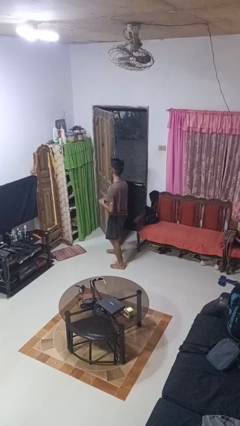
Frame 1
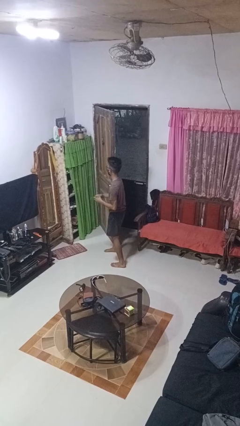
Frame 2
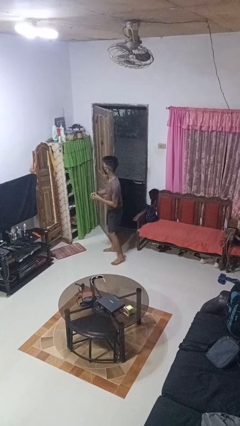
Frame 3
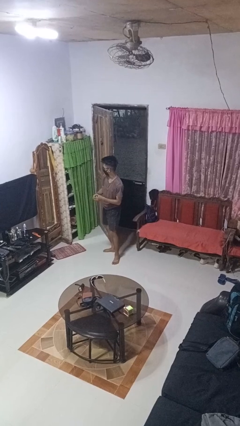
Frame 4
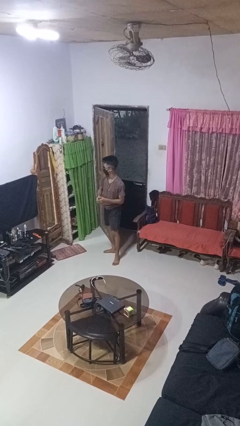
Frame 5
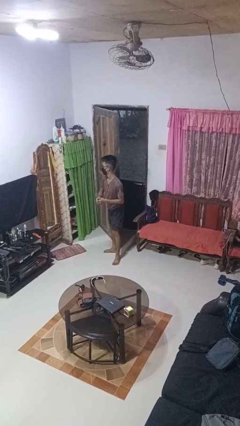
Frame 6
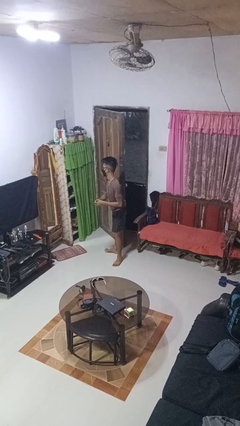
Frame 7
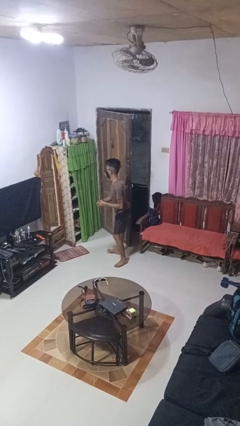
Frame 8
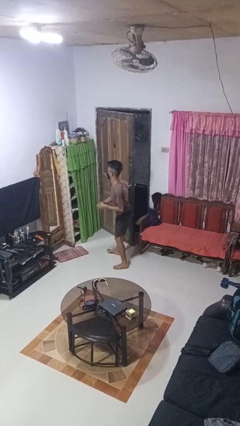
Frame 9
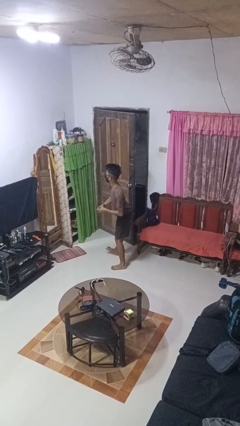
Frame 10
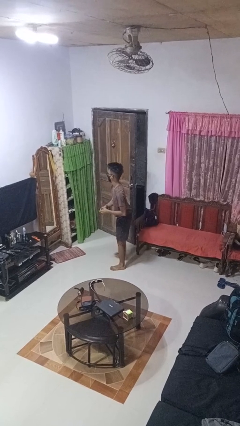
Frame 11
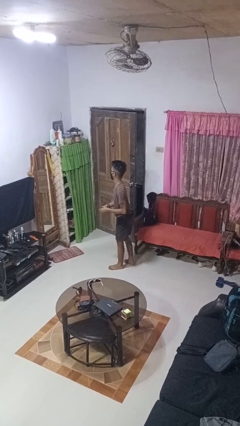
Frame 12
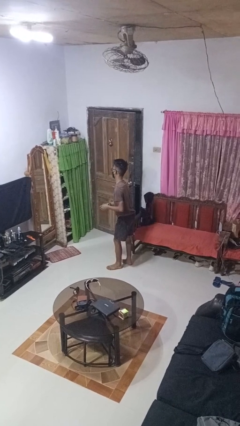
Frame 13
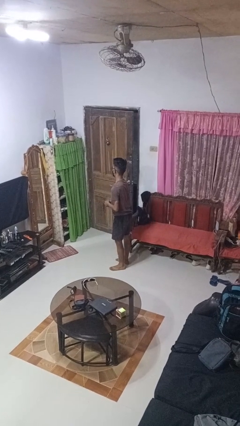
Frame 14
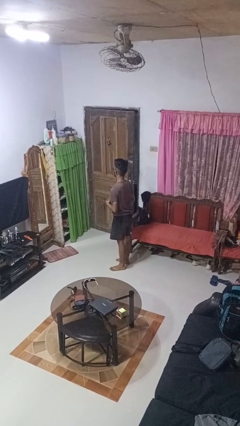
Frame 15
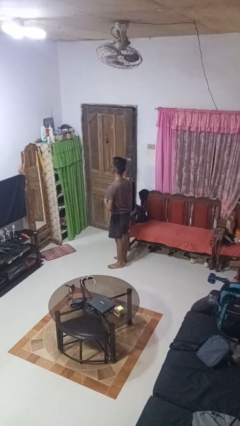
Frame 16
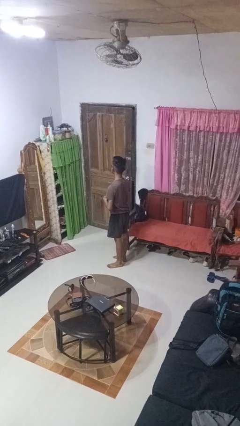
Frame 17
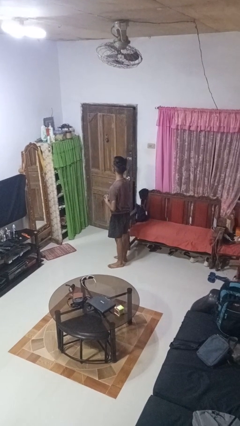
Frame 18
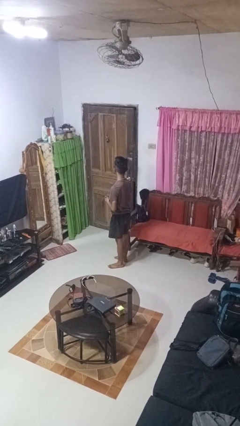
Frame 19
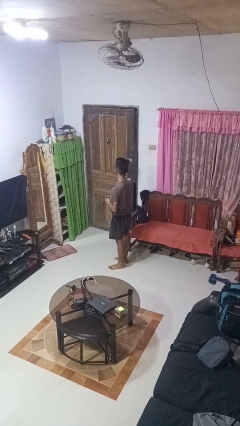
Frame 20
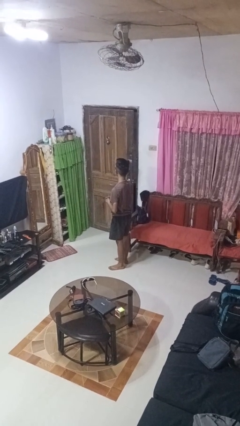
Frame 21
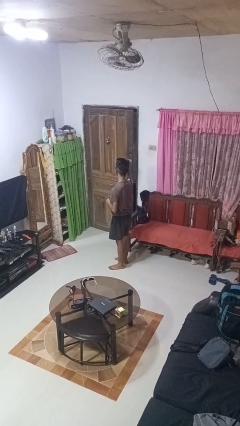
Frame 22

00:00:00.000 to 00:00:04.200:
person closes door with hip

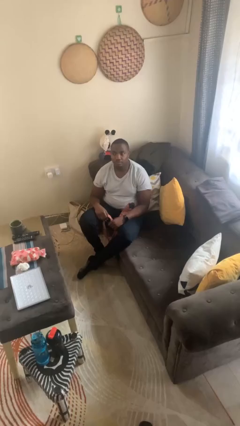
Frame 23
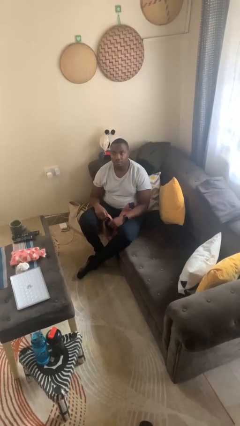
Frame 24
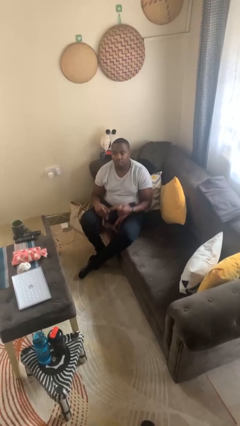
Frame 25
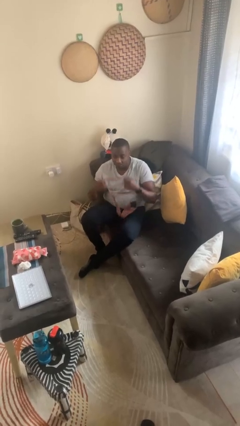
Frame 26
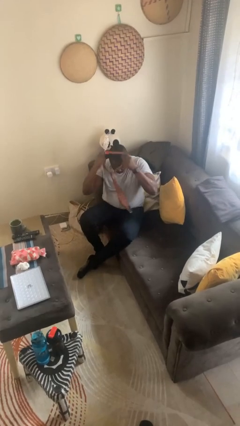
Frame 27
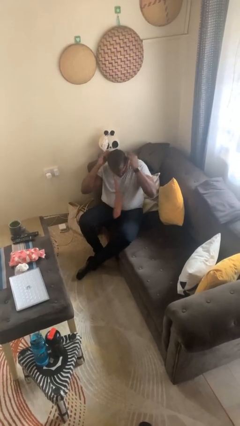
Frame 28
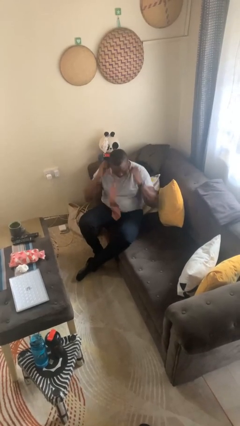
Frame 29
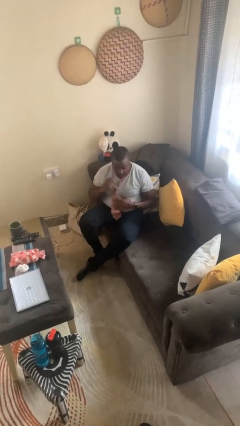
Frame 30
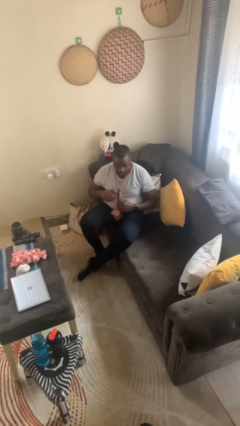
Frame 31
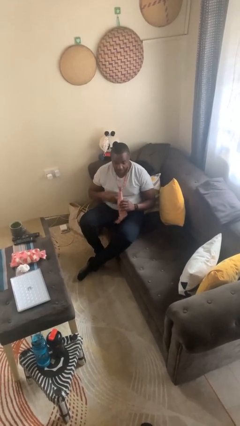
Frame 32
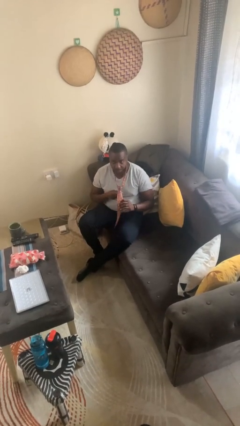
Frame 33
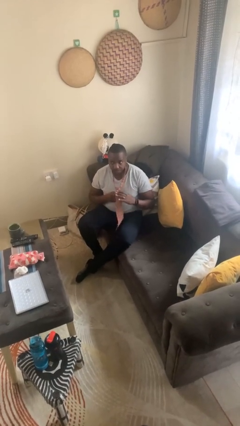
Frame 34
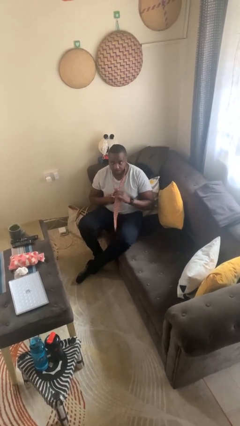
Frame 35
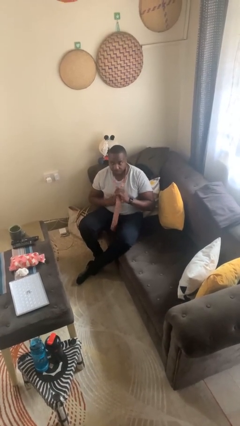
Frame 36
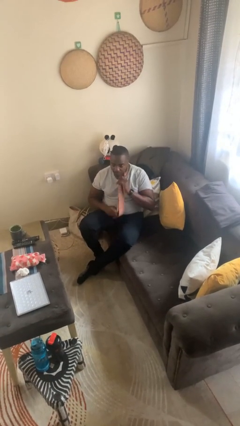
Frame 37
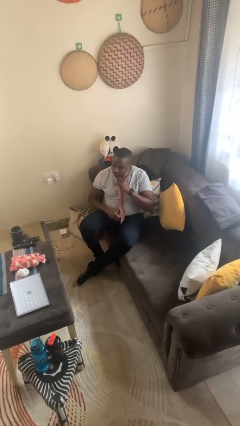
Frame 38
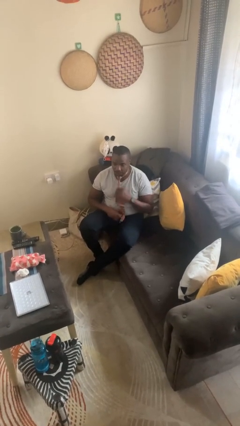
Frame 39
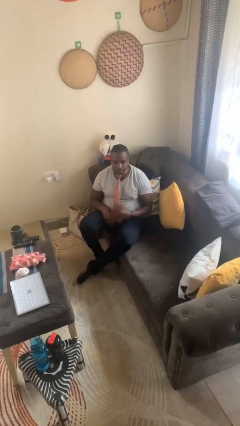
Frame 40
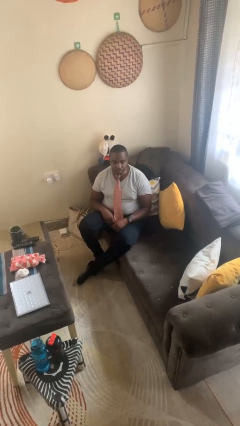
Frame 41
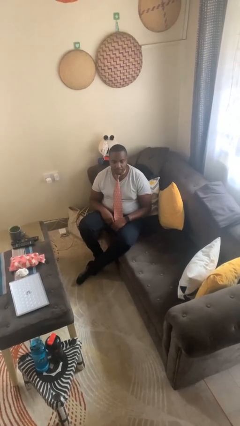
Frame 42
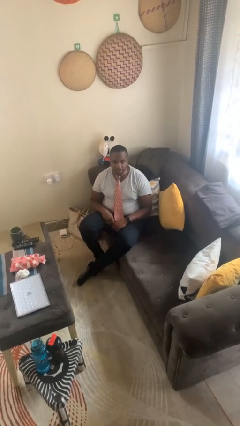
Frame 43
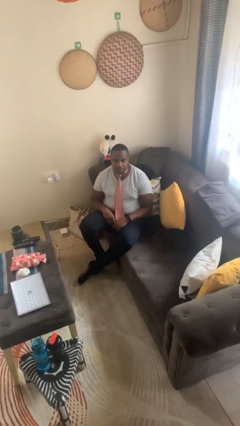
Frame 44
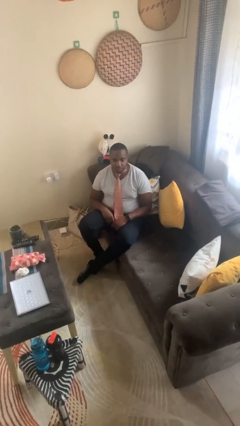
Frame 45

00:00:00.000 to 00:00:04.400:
person puts on necktie

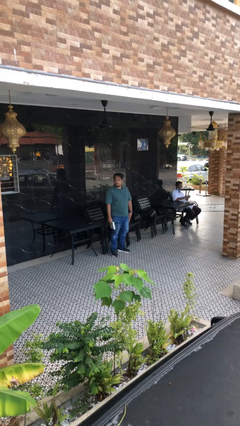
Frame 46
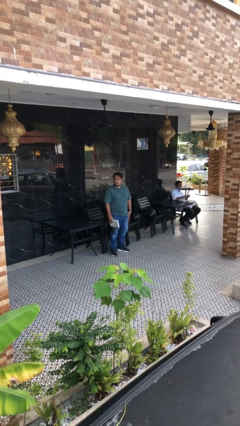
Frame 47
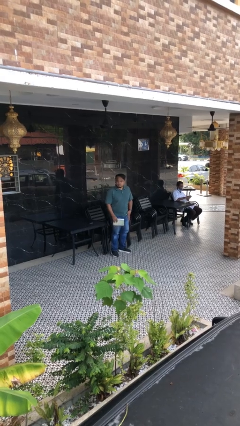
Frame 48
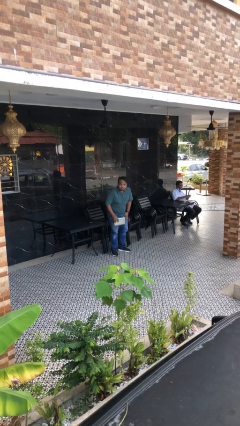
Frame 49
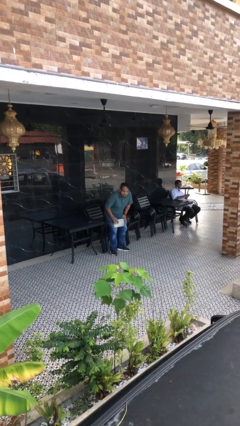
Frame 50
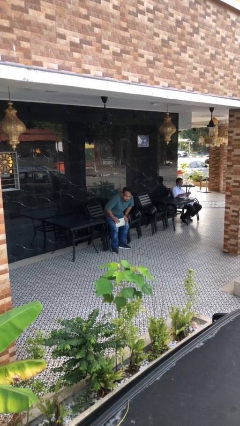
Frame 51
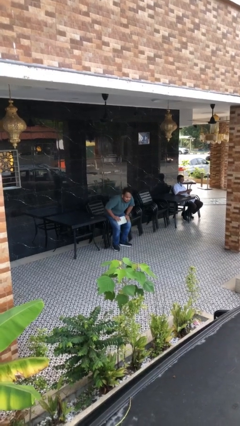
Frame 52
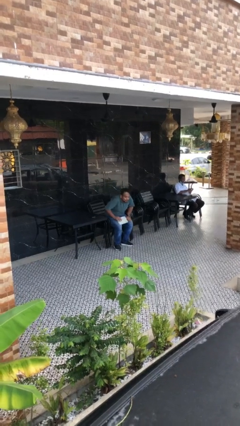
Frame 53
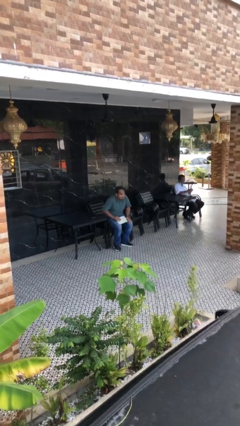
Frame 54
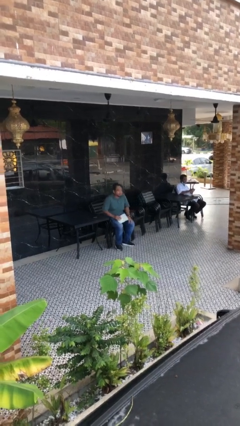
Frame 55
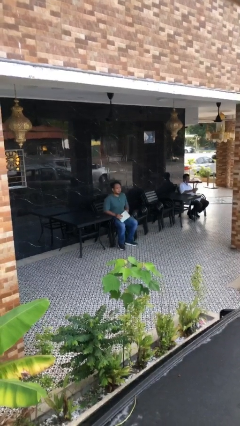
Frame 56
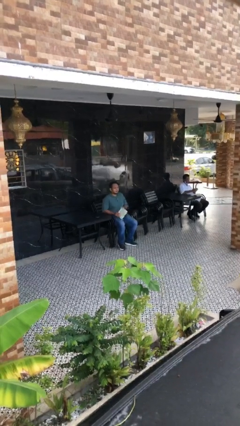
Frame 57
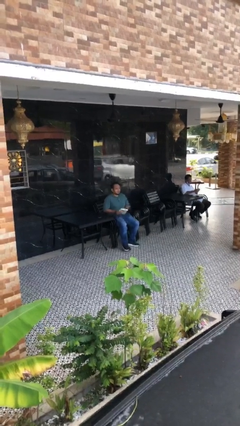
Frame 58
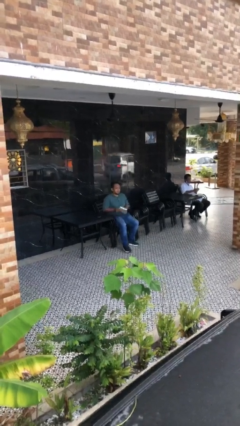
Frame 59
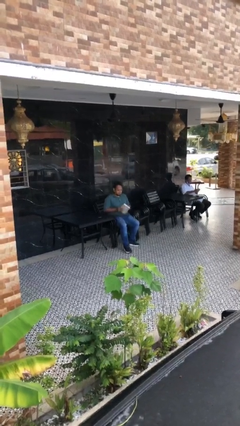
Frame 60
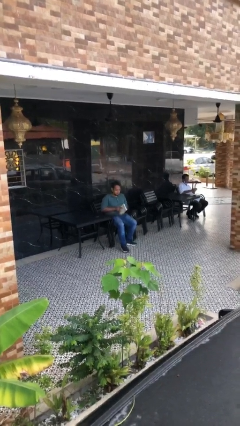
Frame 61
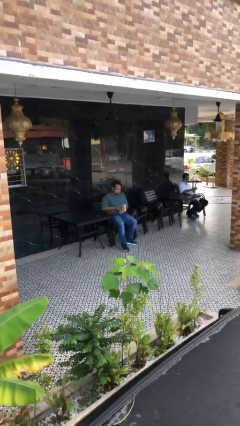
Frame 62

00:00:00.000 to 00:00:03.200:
person sits down

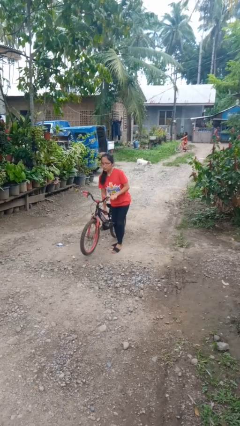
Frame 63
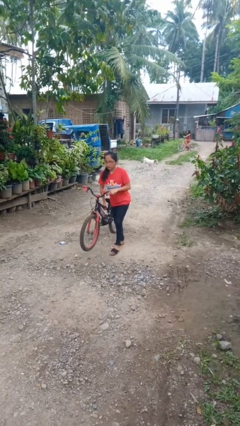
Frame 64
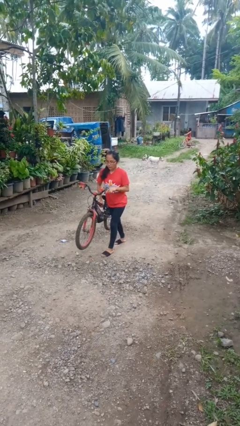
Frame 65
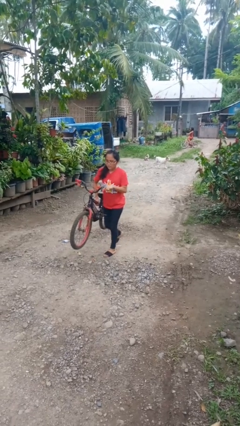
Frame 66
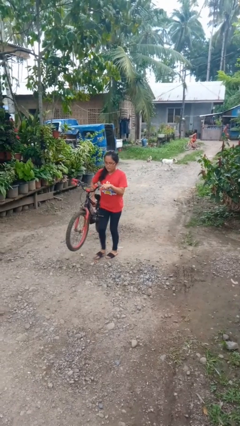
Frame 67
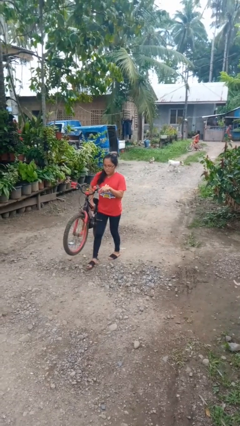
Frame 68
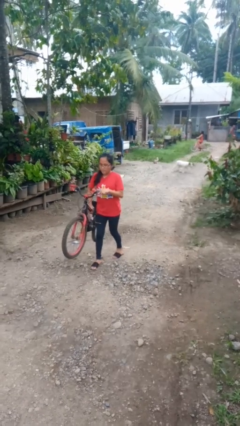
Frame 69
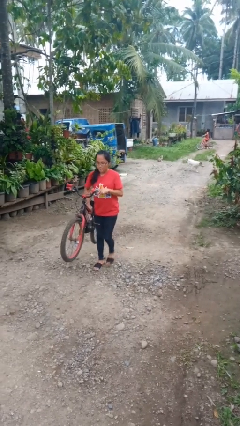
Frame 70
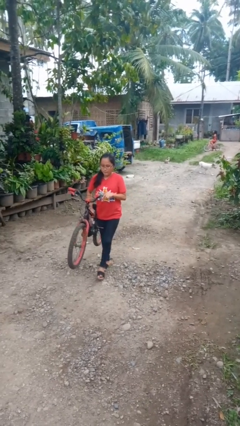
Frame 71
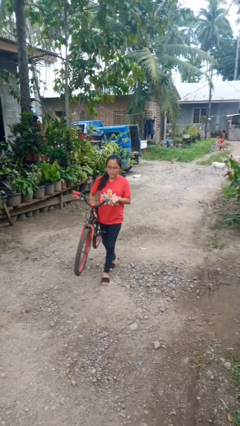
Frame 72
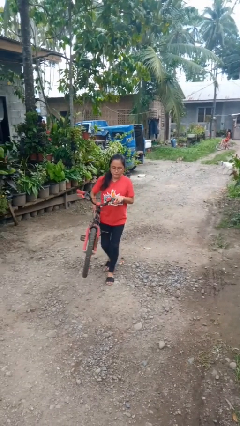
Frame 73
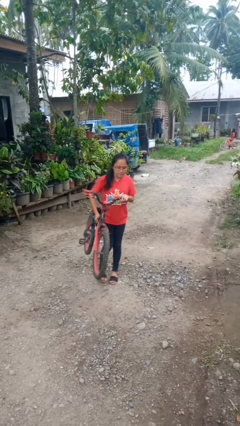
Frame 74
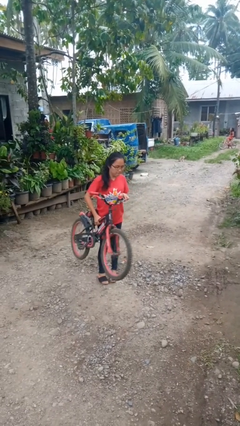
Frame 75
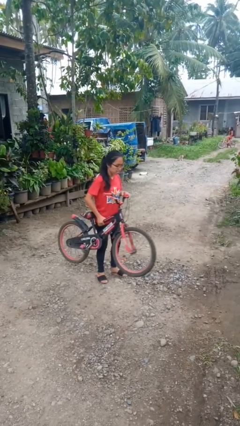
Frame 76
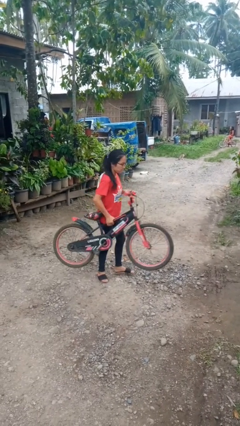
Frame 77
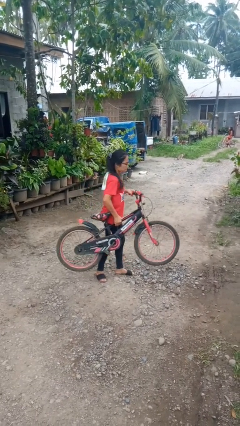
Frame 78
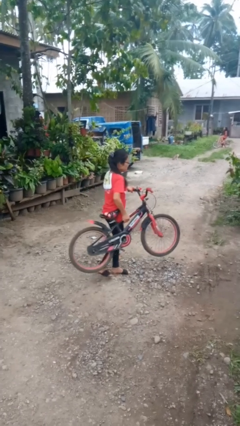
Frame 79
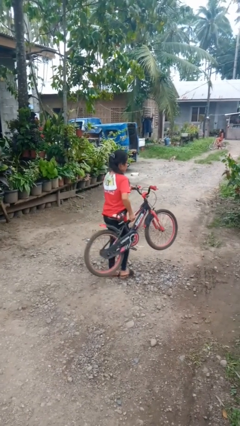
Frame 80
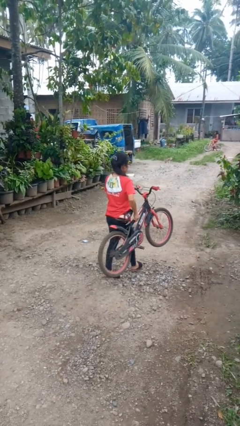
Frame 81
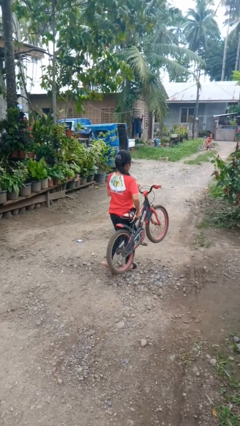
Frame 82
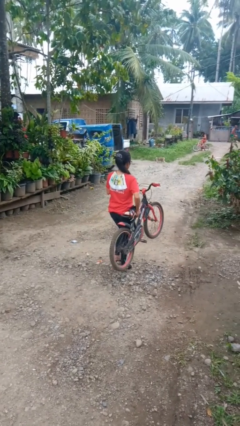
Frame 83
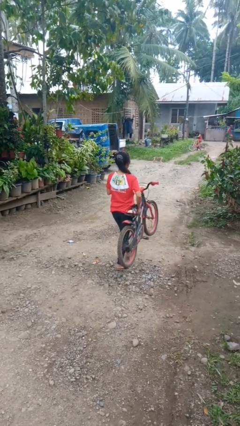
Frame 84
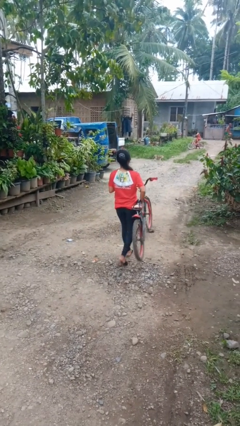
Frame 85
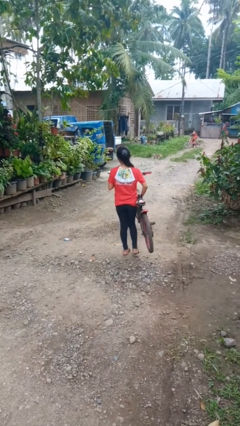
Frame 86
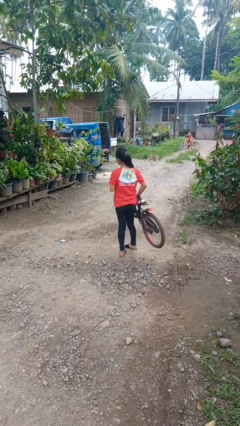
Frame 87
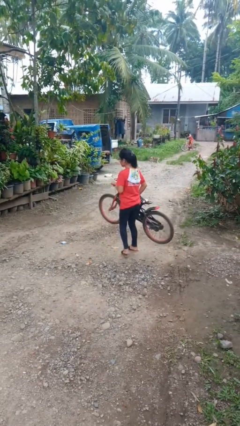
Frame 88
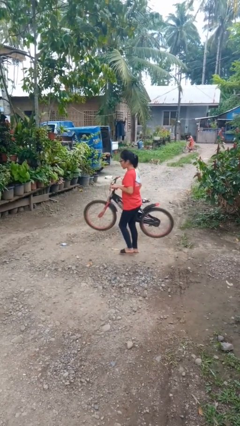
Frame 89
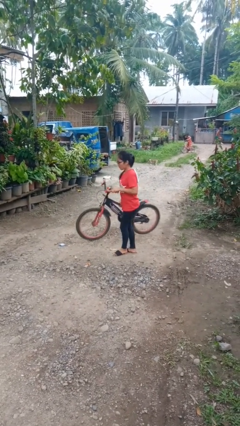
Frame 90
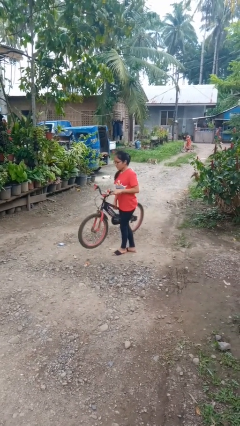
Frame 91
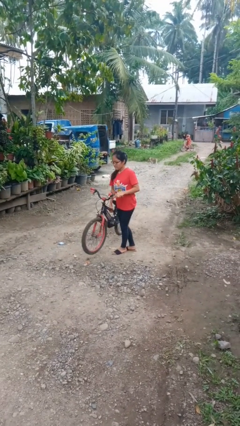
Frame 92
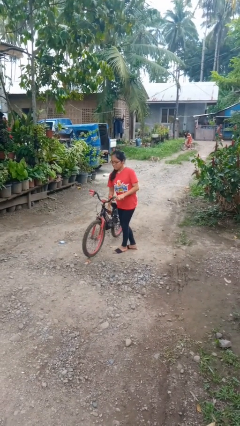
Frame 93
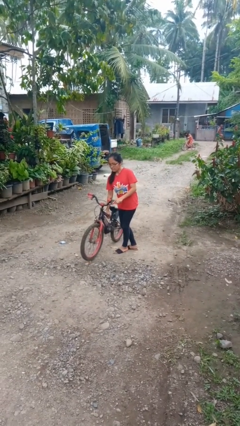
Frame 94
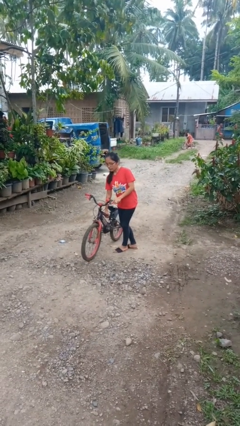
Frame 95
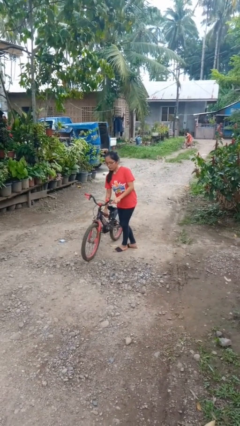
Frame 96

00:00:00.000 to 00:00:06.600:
person carries bicycle
